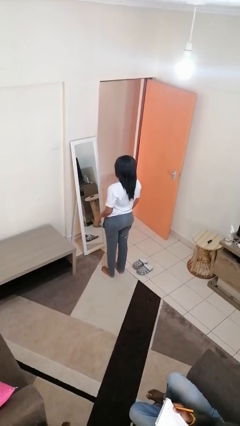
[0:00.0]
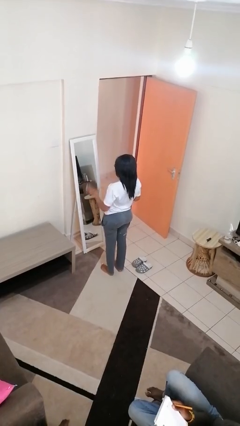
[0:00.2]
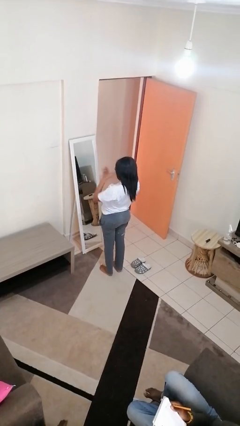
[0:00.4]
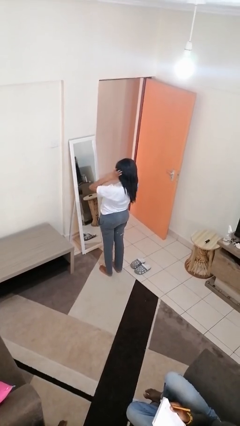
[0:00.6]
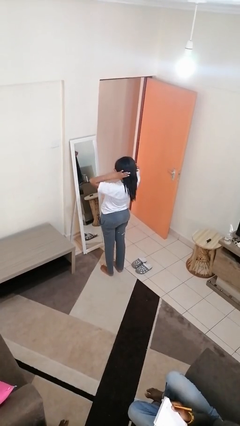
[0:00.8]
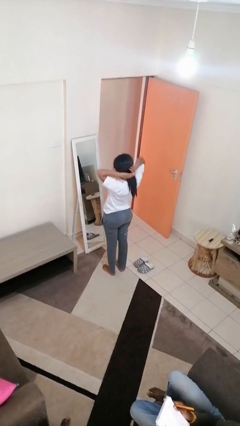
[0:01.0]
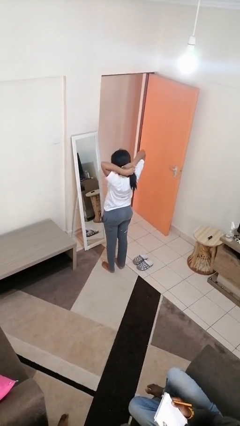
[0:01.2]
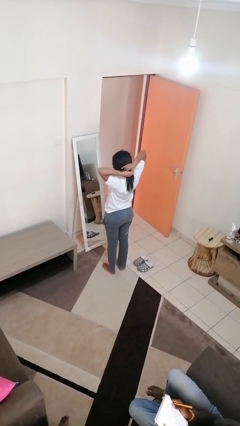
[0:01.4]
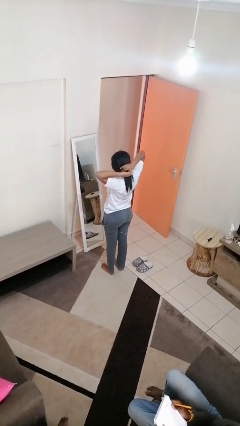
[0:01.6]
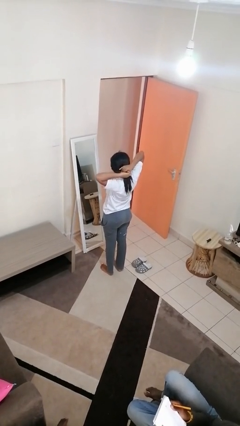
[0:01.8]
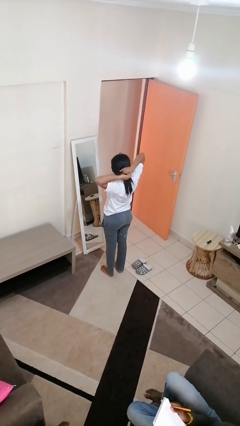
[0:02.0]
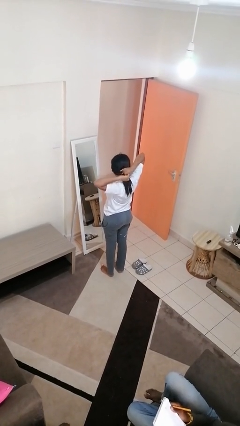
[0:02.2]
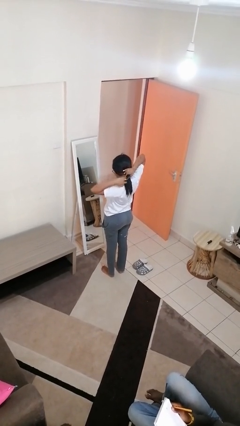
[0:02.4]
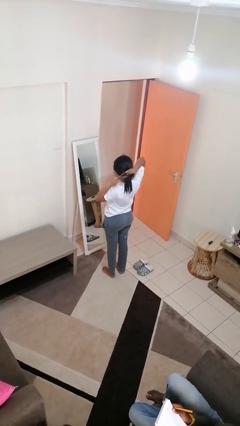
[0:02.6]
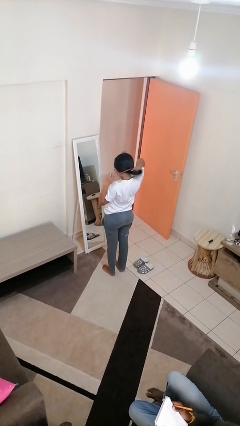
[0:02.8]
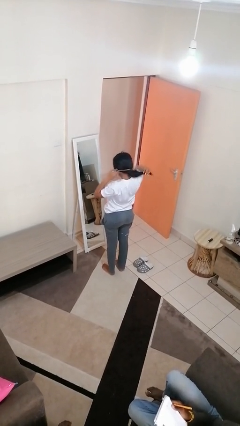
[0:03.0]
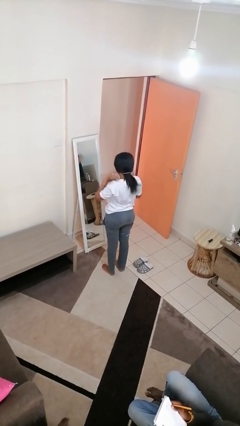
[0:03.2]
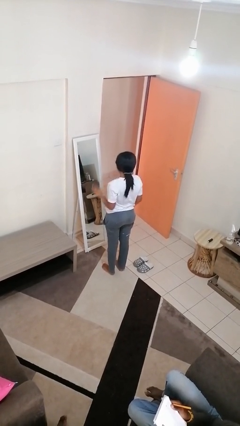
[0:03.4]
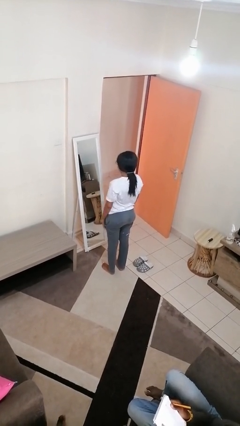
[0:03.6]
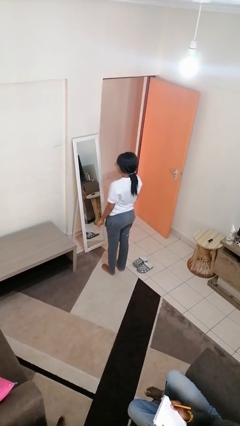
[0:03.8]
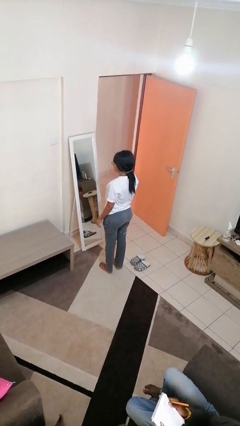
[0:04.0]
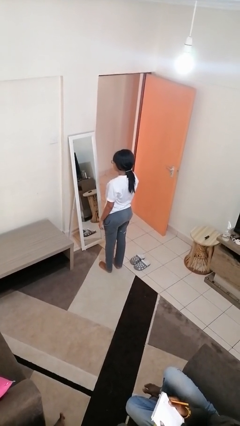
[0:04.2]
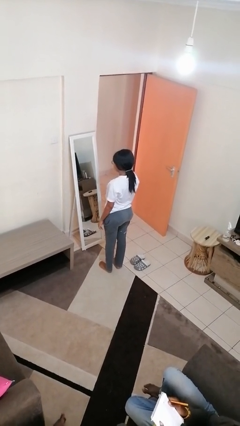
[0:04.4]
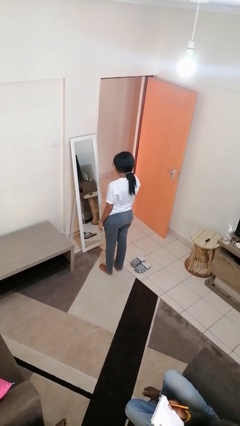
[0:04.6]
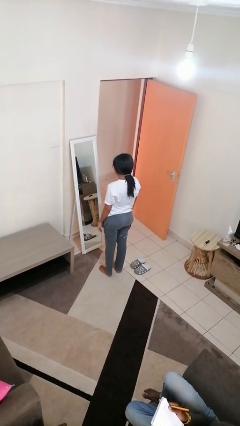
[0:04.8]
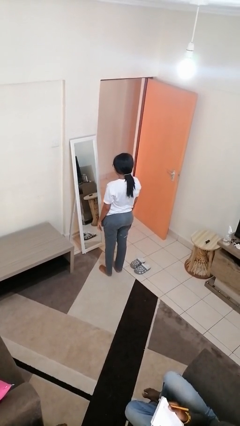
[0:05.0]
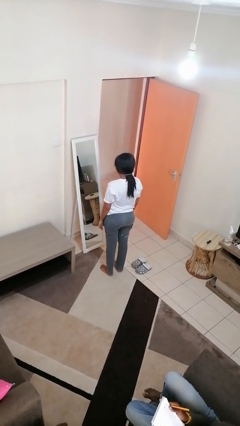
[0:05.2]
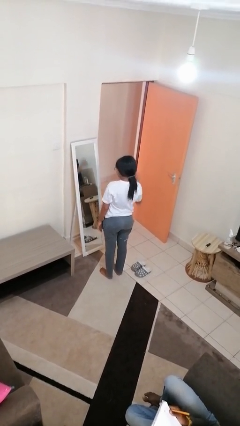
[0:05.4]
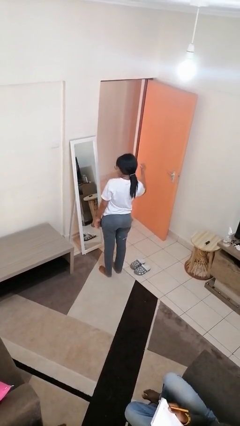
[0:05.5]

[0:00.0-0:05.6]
person puts hair in ponytail

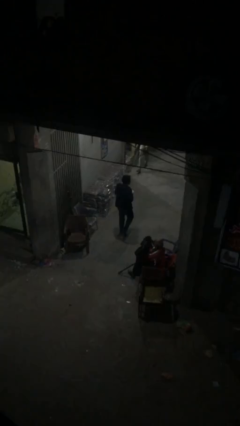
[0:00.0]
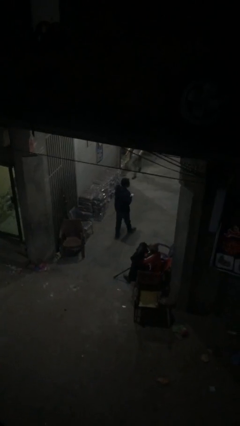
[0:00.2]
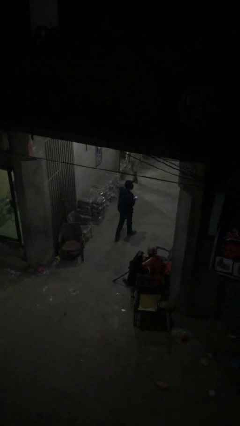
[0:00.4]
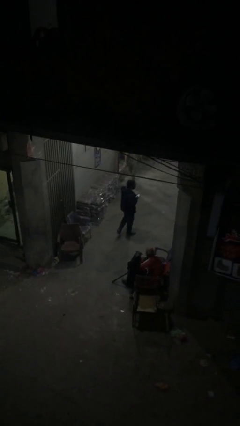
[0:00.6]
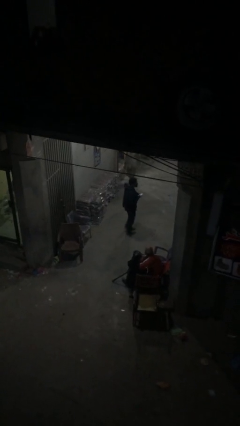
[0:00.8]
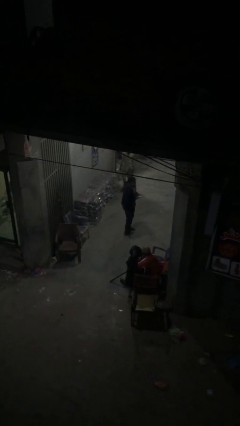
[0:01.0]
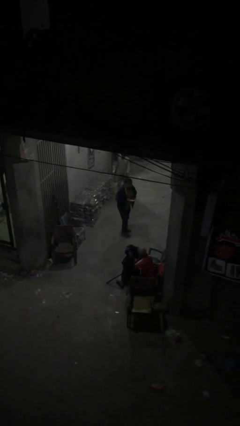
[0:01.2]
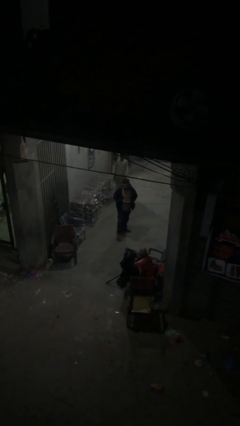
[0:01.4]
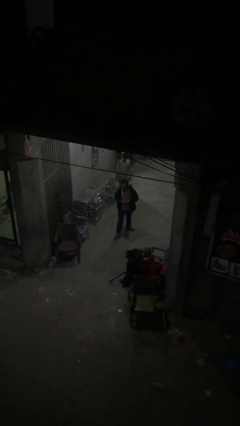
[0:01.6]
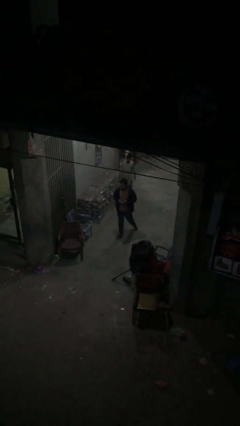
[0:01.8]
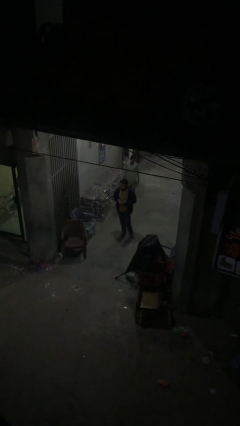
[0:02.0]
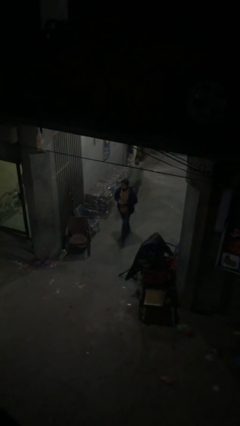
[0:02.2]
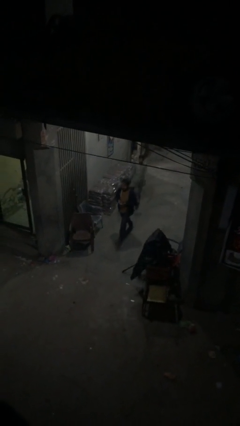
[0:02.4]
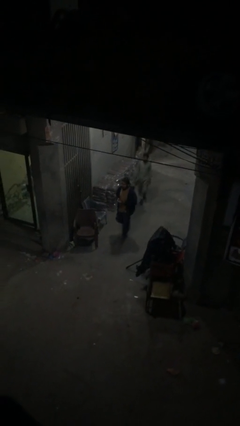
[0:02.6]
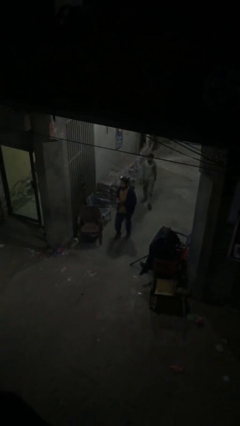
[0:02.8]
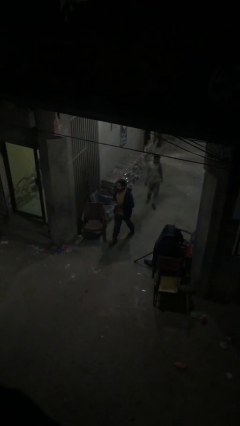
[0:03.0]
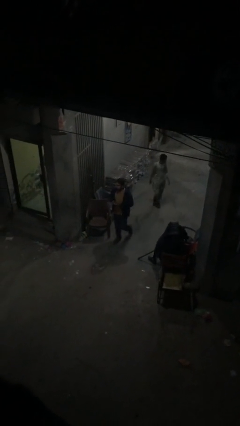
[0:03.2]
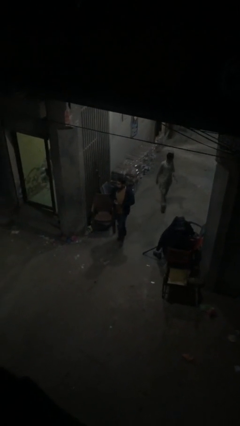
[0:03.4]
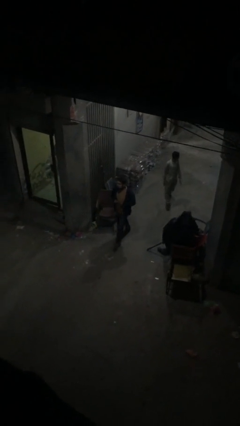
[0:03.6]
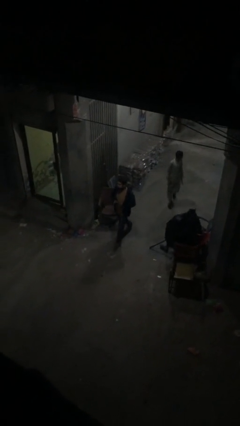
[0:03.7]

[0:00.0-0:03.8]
person exits scene through structure

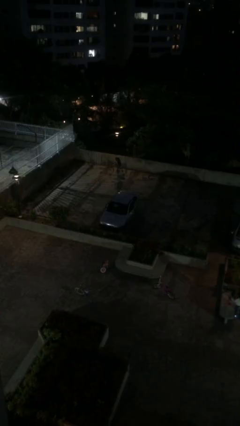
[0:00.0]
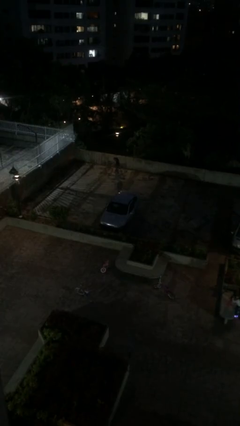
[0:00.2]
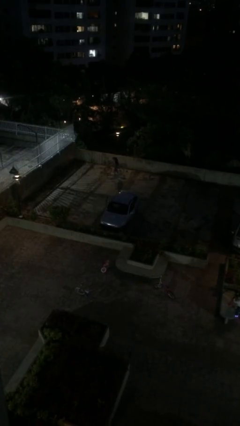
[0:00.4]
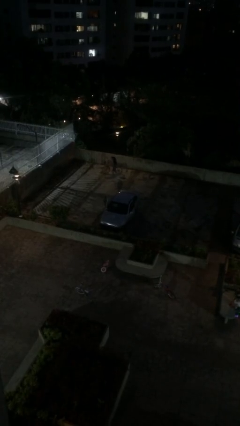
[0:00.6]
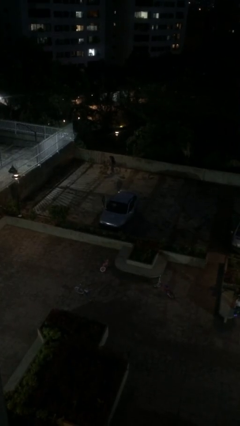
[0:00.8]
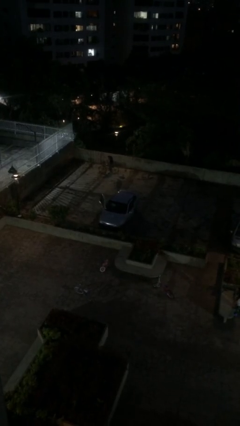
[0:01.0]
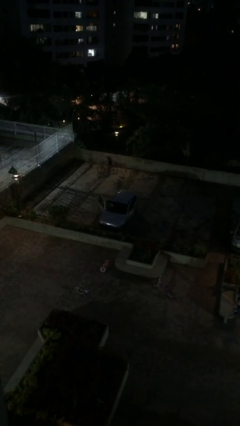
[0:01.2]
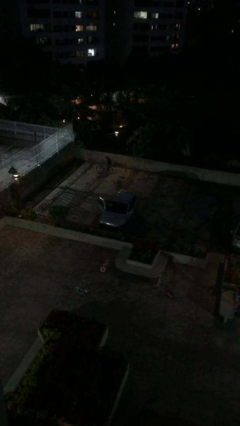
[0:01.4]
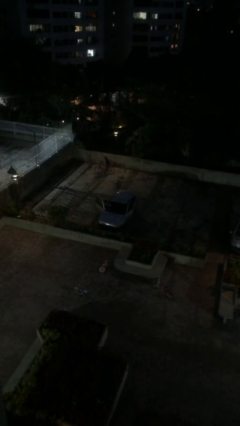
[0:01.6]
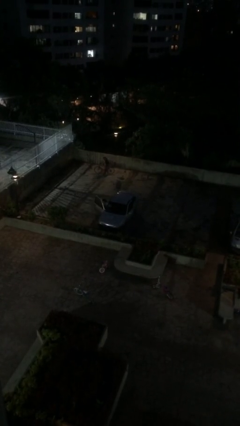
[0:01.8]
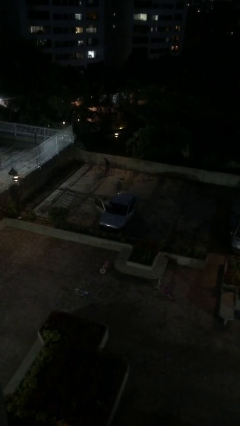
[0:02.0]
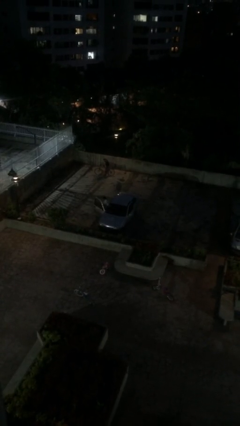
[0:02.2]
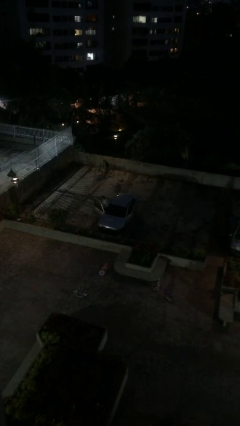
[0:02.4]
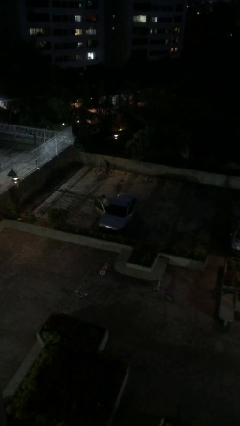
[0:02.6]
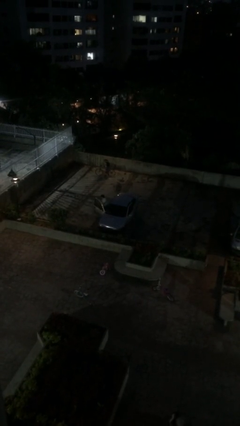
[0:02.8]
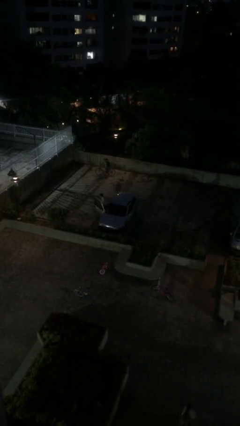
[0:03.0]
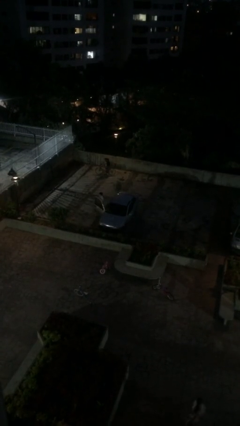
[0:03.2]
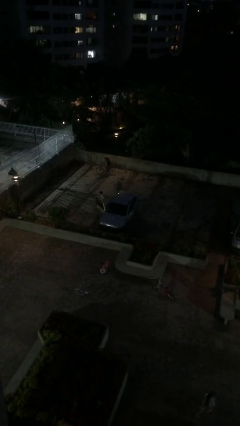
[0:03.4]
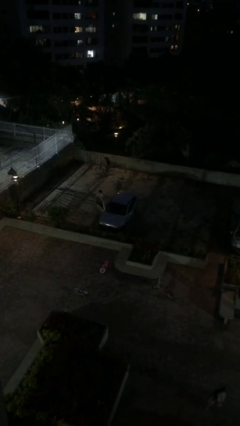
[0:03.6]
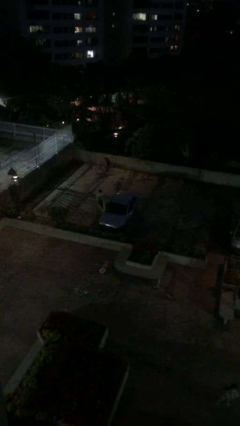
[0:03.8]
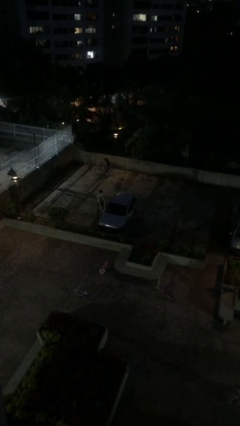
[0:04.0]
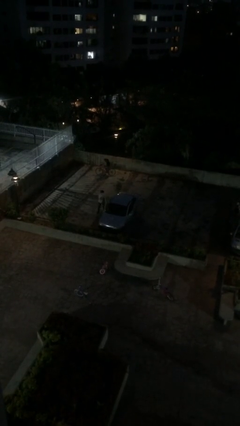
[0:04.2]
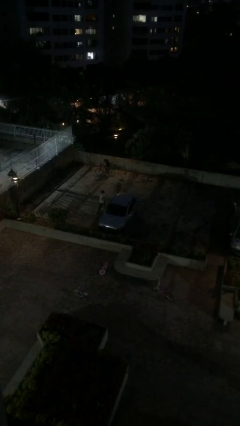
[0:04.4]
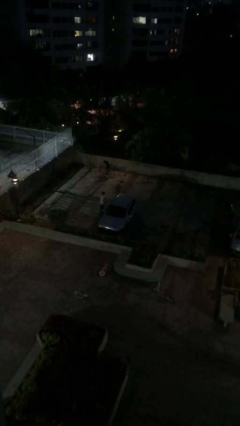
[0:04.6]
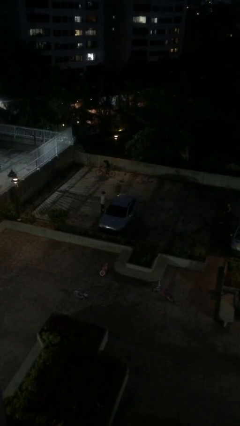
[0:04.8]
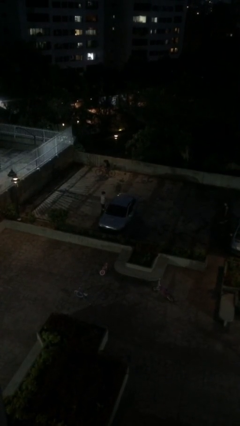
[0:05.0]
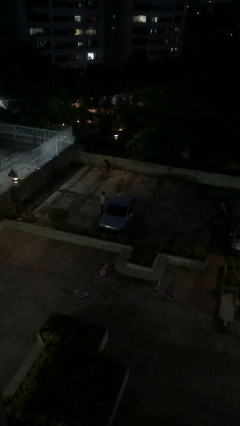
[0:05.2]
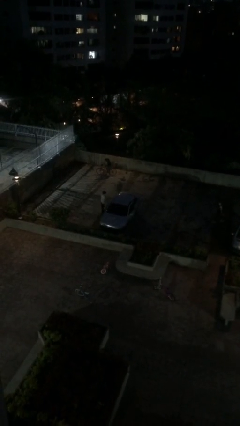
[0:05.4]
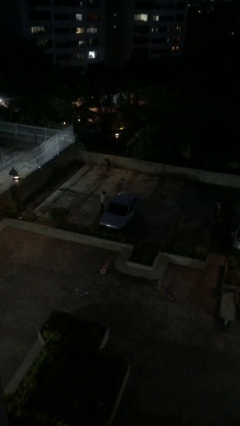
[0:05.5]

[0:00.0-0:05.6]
car drops off person

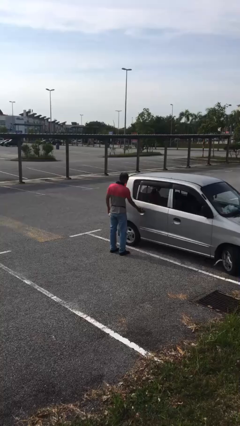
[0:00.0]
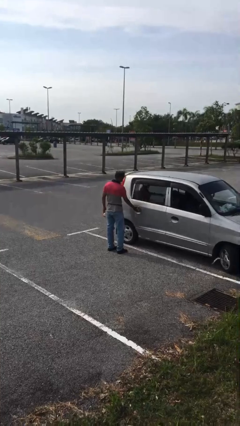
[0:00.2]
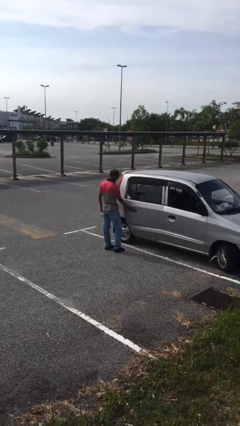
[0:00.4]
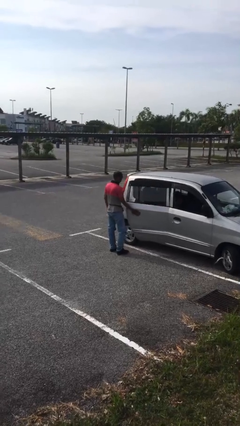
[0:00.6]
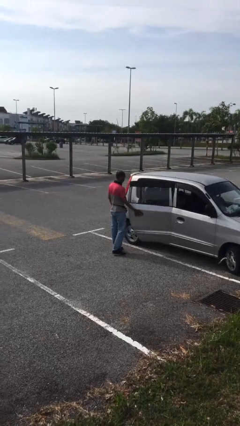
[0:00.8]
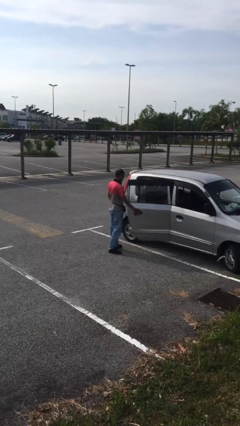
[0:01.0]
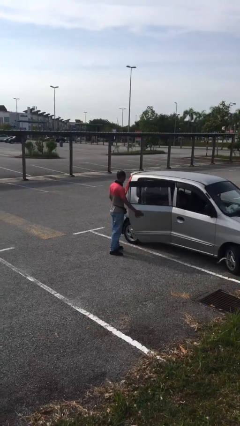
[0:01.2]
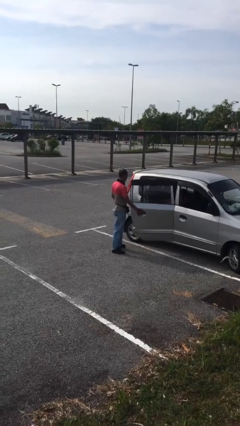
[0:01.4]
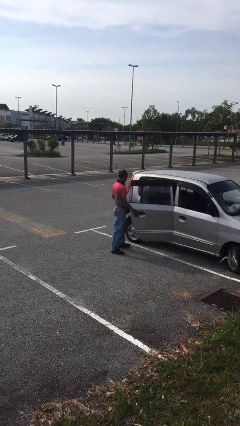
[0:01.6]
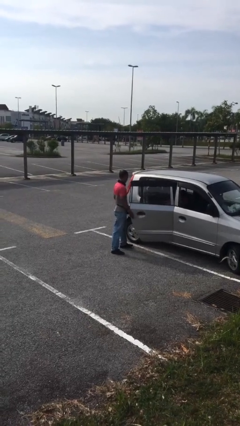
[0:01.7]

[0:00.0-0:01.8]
person opens car door

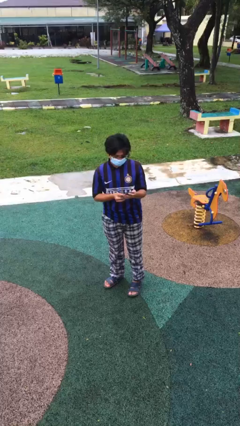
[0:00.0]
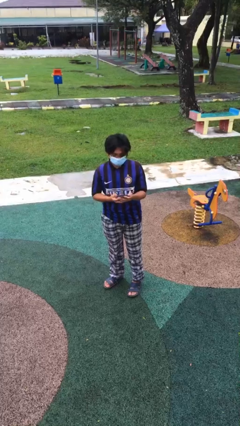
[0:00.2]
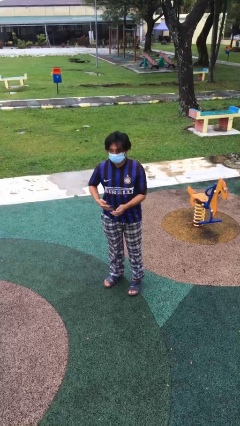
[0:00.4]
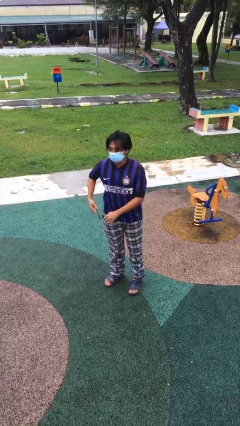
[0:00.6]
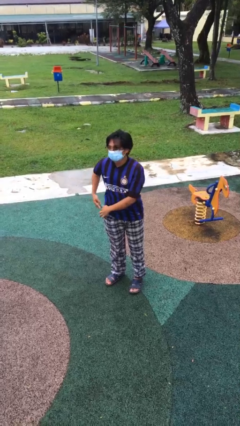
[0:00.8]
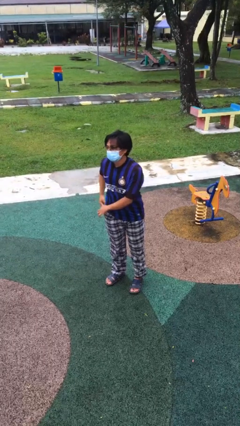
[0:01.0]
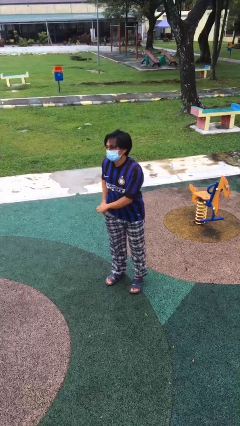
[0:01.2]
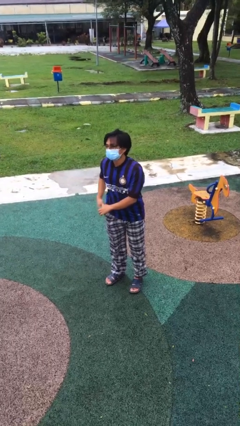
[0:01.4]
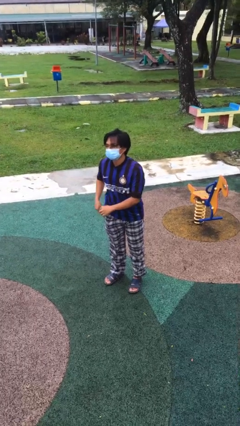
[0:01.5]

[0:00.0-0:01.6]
person puts phone into pocket
